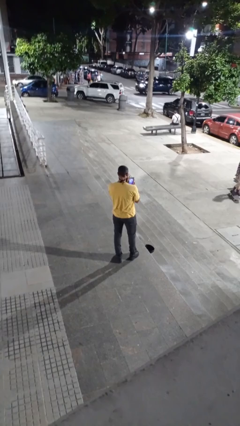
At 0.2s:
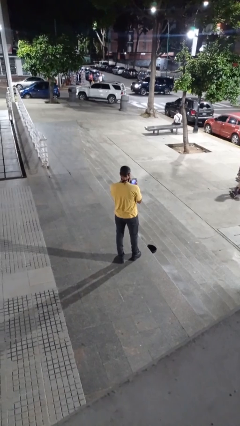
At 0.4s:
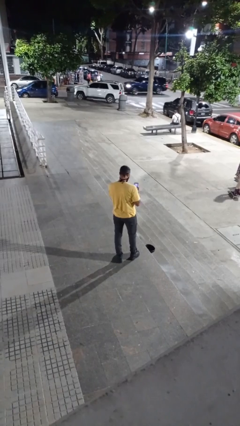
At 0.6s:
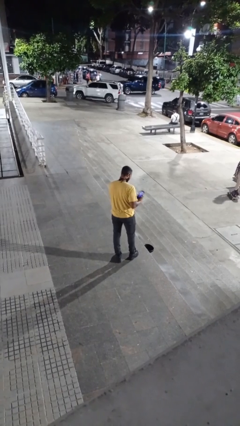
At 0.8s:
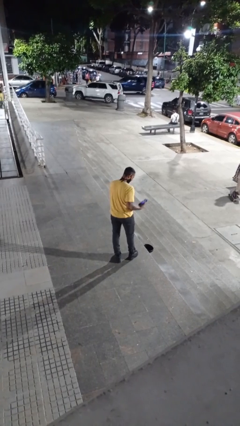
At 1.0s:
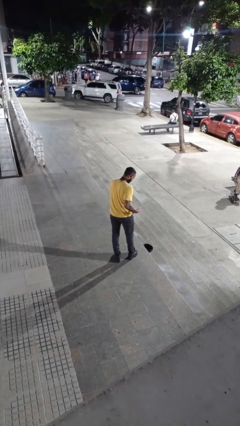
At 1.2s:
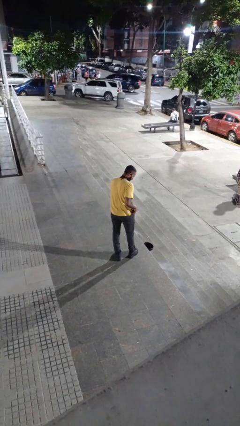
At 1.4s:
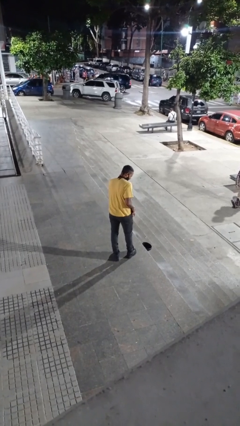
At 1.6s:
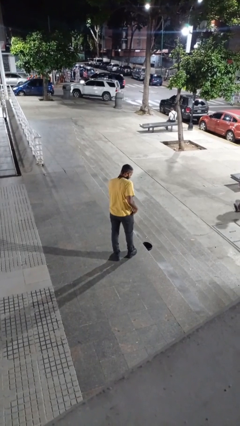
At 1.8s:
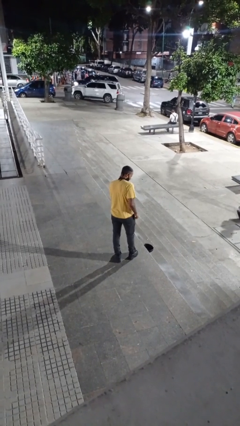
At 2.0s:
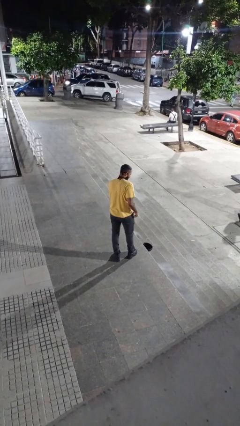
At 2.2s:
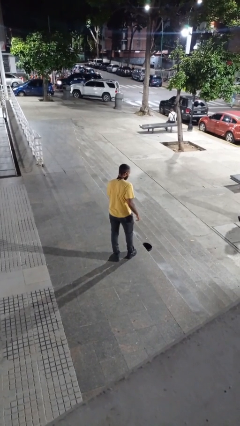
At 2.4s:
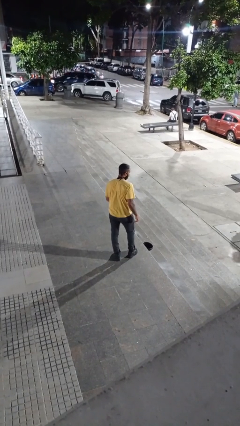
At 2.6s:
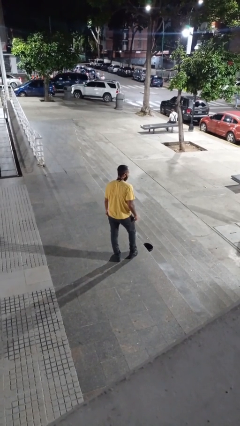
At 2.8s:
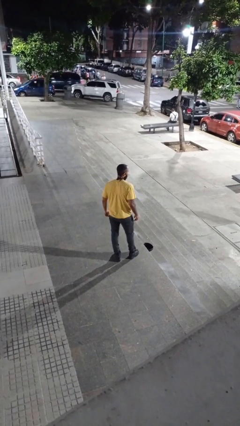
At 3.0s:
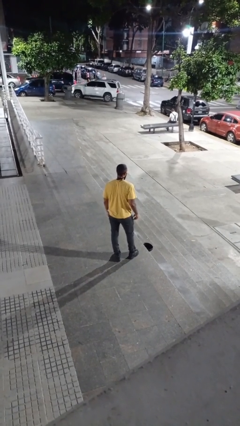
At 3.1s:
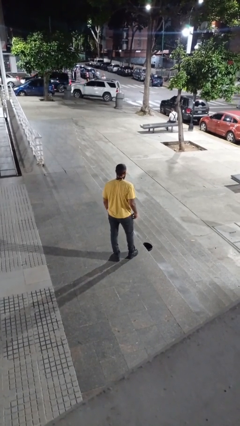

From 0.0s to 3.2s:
person puts phone into pocket

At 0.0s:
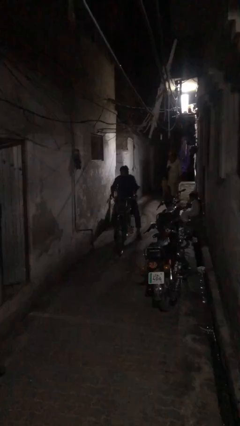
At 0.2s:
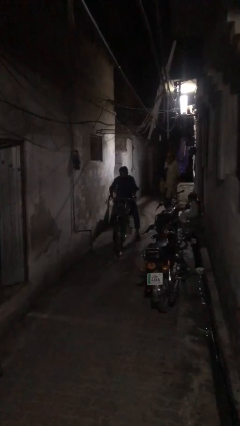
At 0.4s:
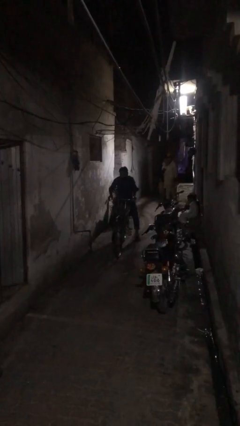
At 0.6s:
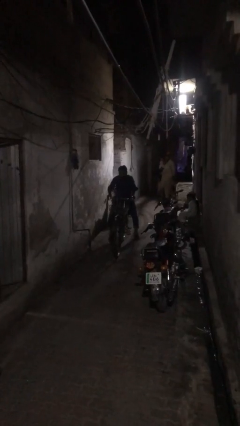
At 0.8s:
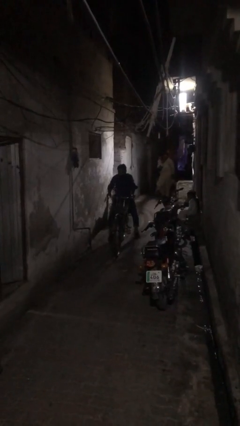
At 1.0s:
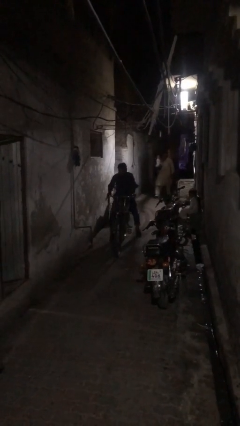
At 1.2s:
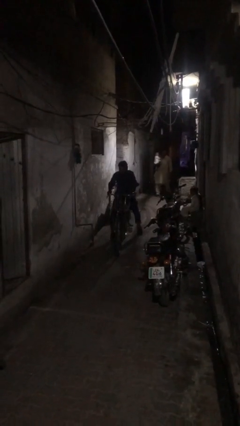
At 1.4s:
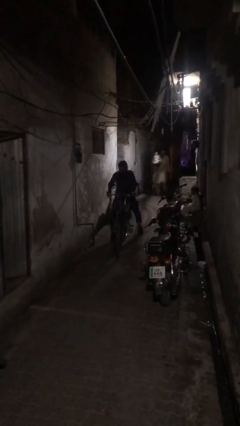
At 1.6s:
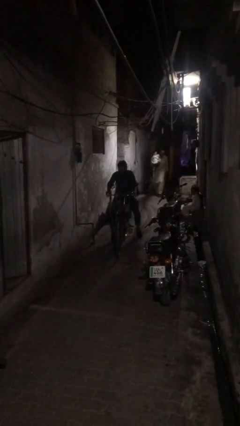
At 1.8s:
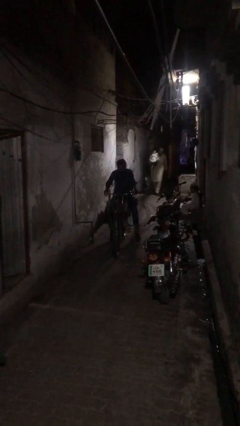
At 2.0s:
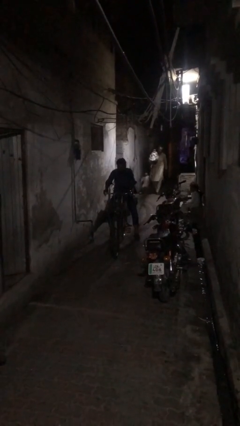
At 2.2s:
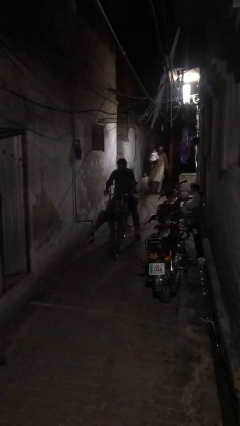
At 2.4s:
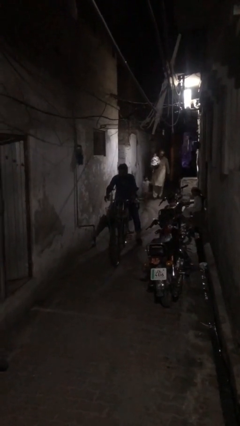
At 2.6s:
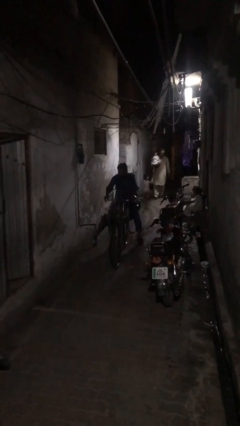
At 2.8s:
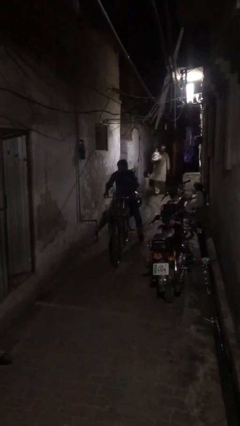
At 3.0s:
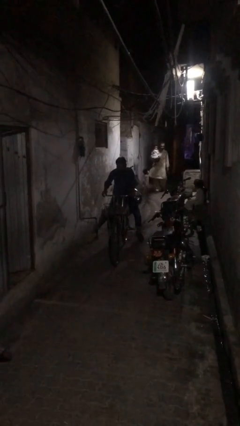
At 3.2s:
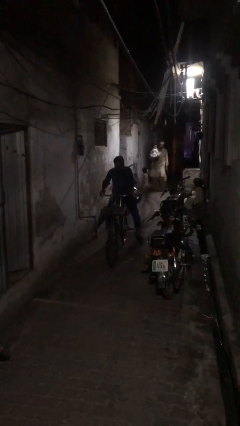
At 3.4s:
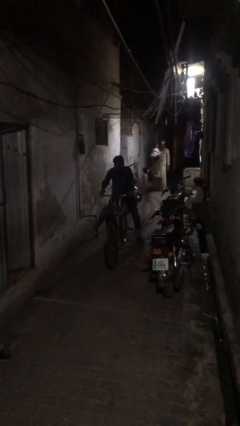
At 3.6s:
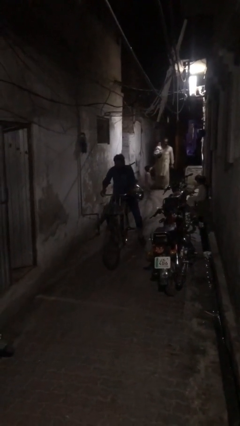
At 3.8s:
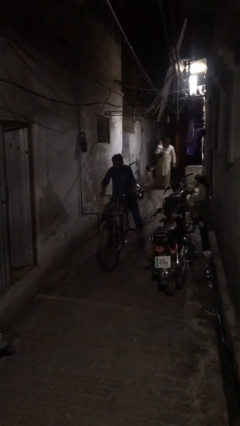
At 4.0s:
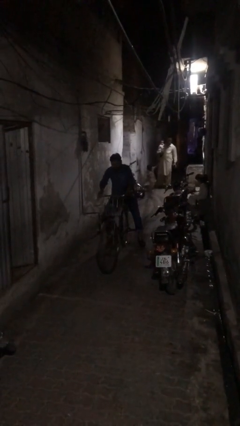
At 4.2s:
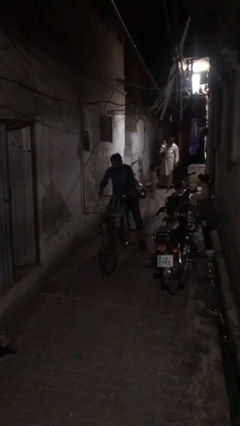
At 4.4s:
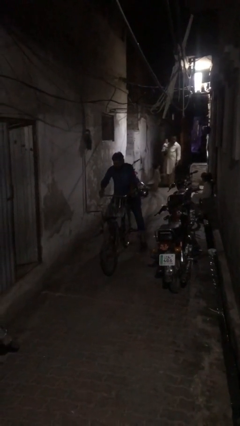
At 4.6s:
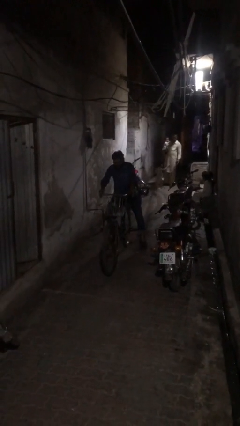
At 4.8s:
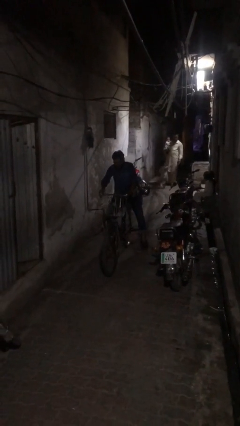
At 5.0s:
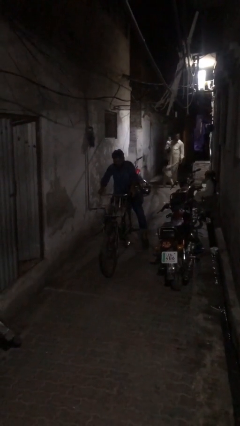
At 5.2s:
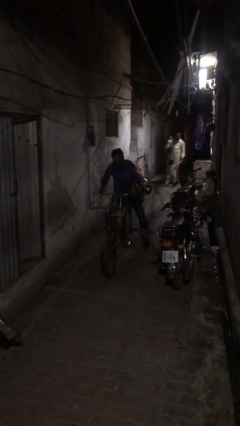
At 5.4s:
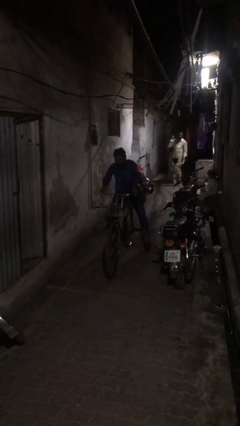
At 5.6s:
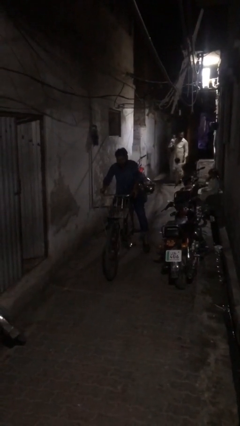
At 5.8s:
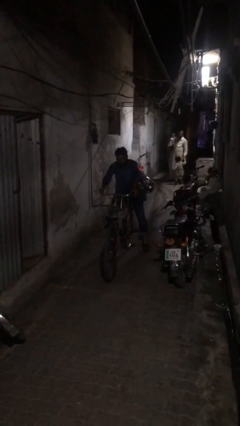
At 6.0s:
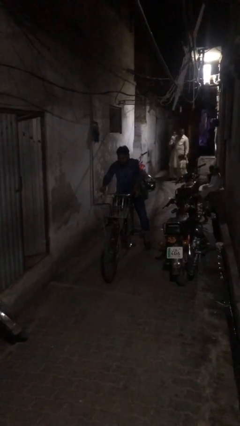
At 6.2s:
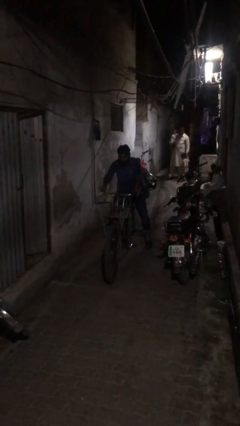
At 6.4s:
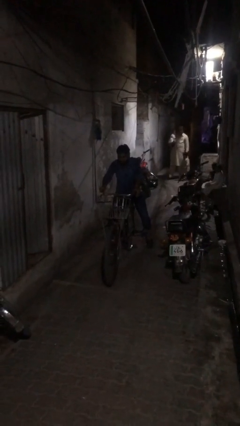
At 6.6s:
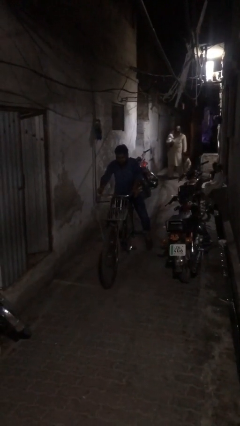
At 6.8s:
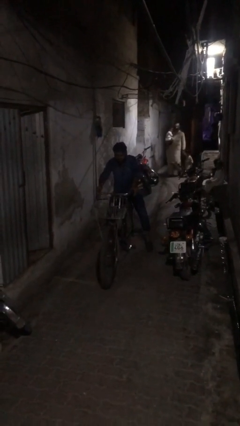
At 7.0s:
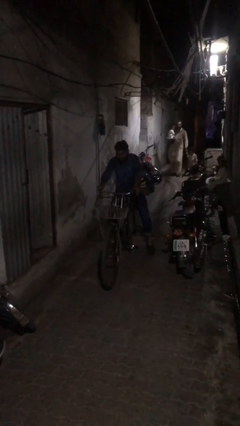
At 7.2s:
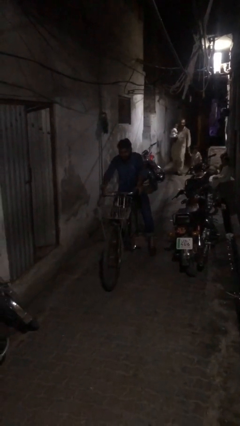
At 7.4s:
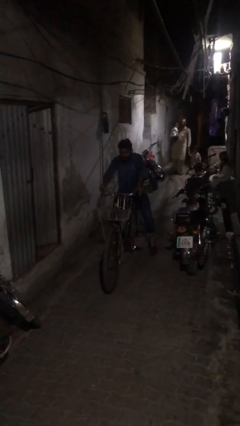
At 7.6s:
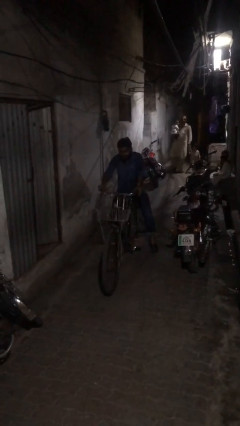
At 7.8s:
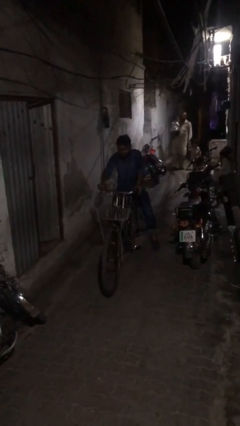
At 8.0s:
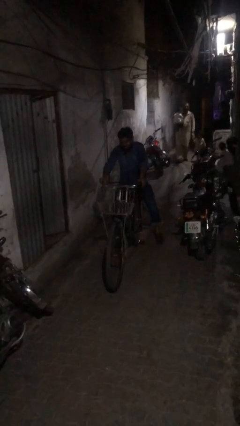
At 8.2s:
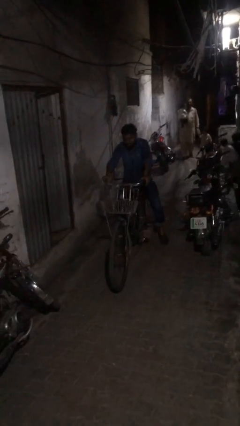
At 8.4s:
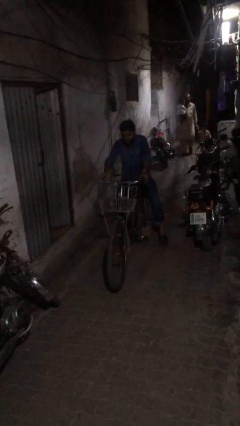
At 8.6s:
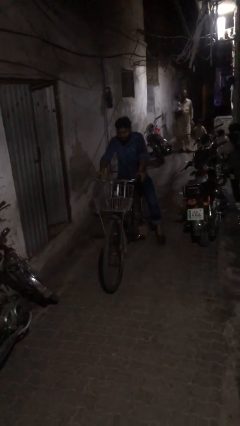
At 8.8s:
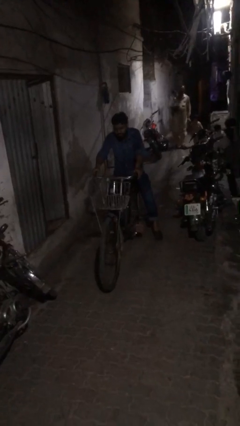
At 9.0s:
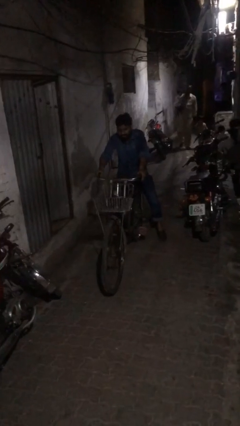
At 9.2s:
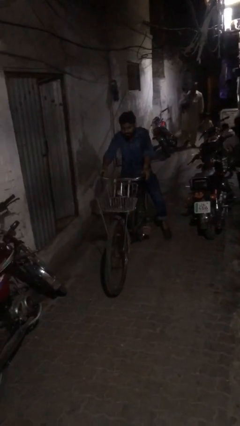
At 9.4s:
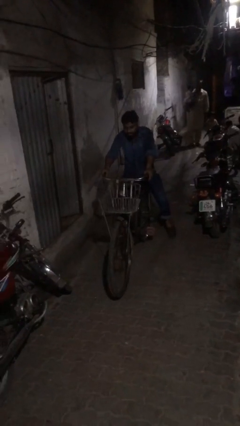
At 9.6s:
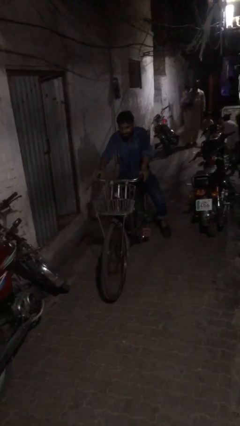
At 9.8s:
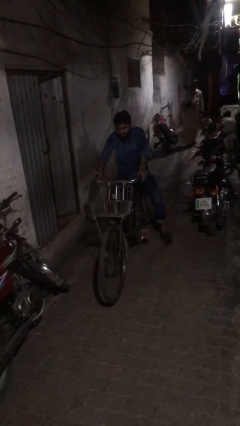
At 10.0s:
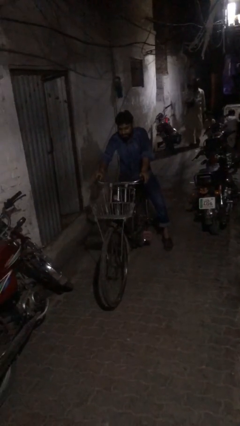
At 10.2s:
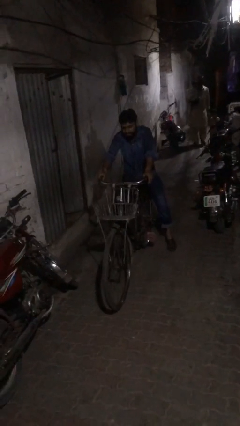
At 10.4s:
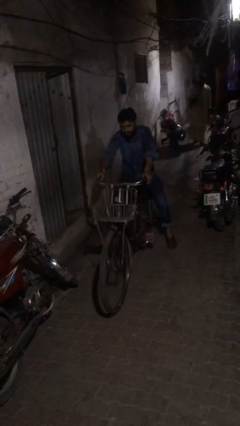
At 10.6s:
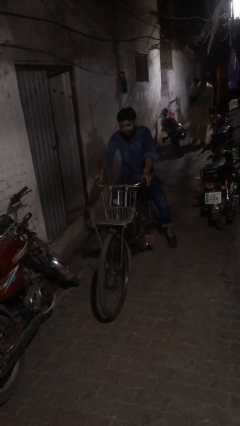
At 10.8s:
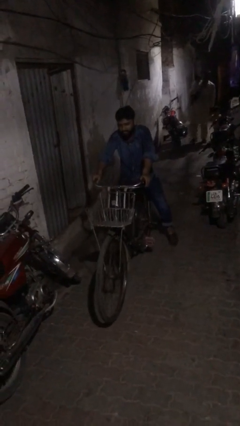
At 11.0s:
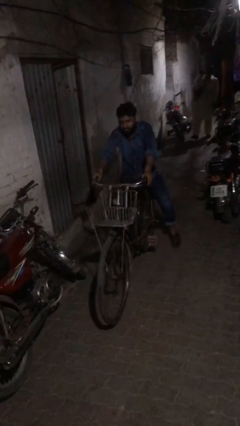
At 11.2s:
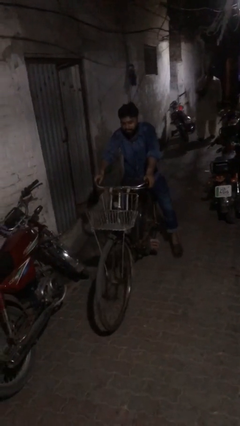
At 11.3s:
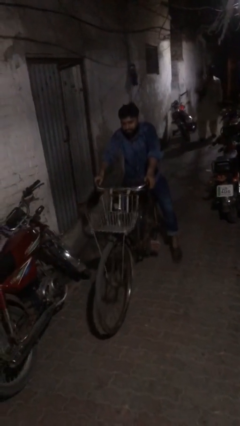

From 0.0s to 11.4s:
person rides bicycle

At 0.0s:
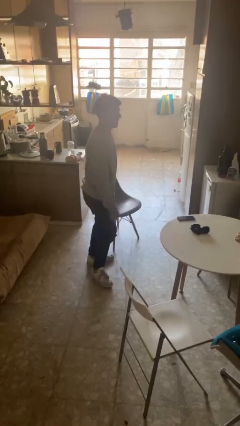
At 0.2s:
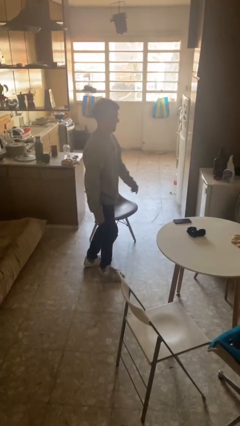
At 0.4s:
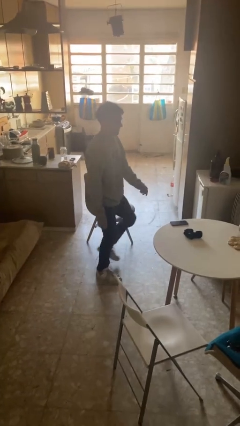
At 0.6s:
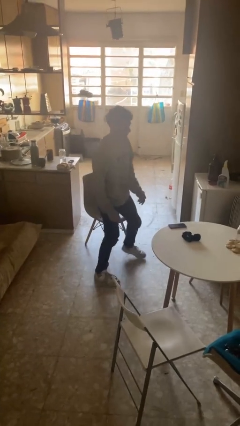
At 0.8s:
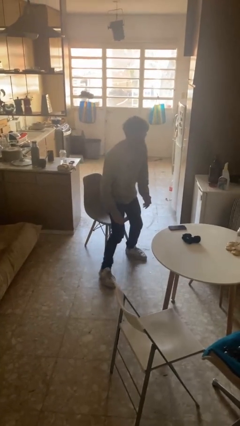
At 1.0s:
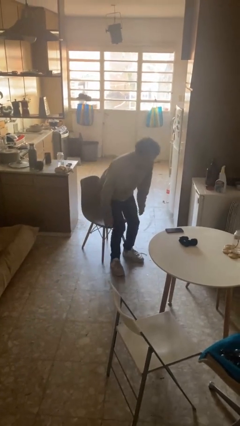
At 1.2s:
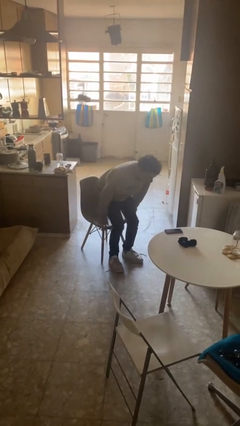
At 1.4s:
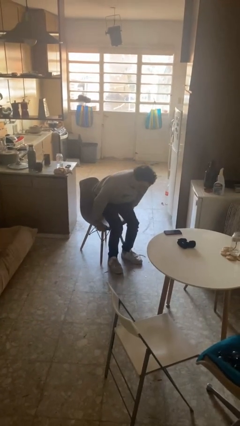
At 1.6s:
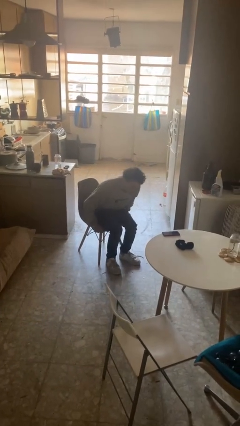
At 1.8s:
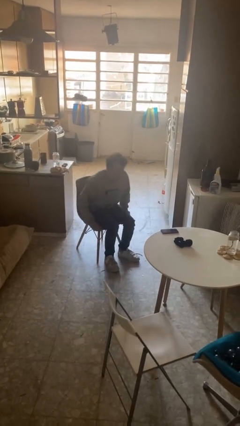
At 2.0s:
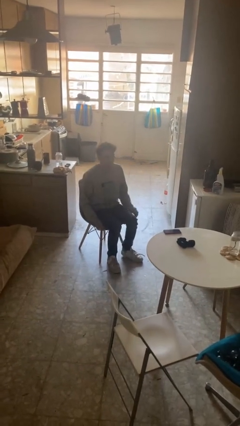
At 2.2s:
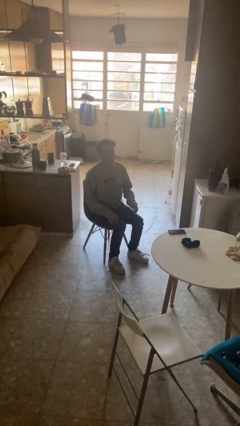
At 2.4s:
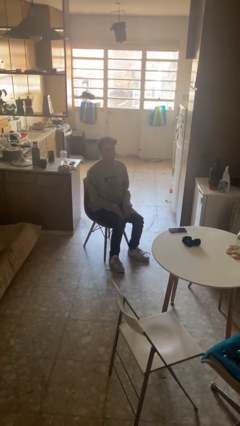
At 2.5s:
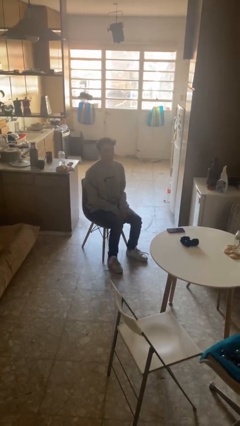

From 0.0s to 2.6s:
person sits down

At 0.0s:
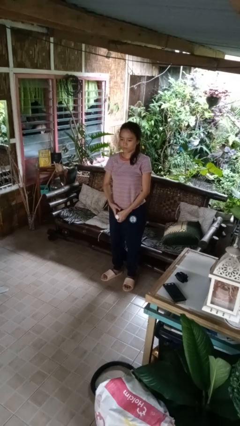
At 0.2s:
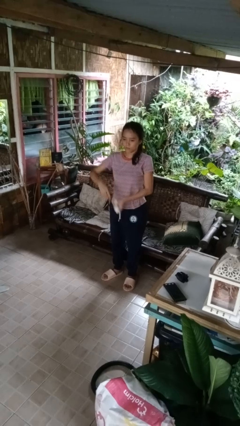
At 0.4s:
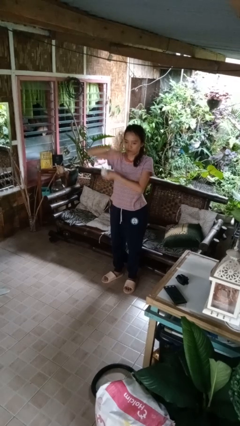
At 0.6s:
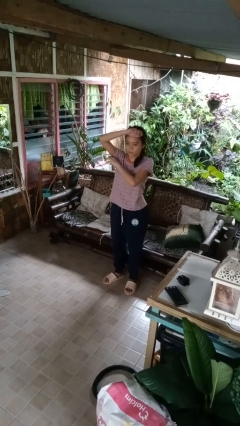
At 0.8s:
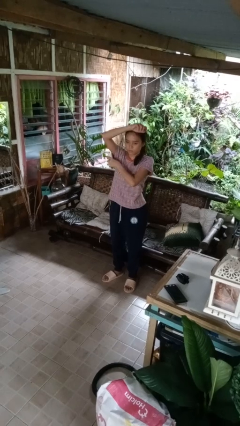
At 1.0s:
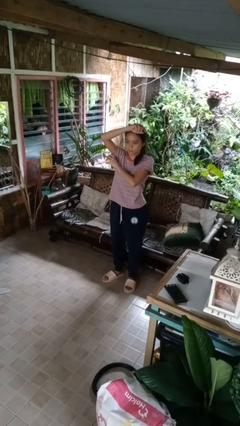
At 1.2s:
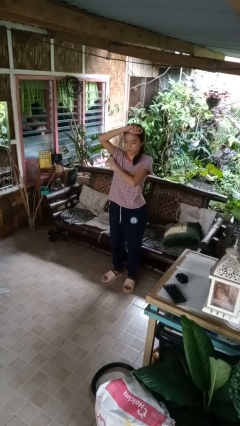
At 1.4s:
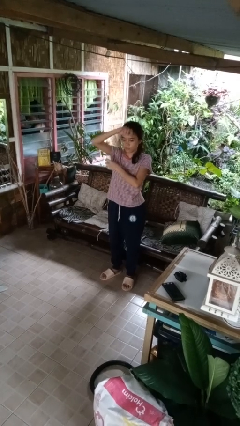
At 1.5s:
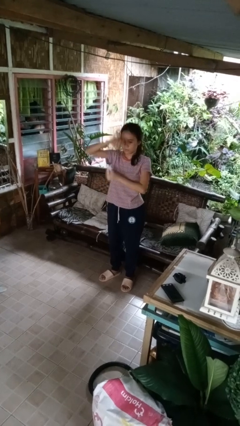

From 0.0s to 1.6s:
person applies deodorant
